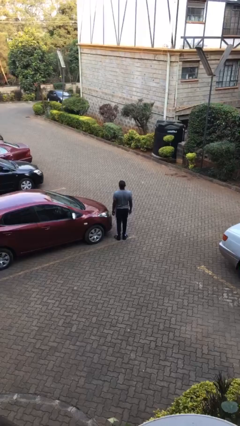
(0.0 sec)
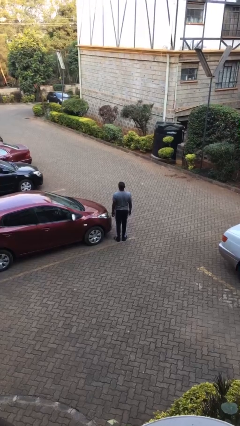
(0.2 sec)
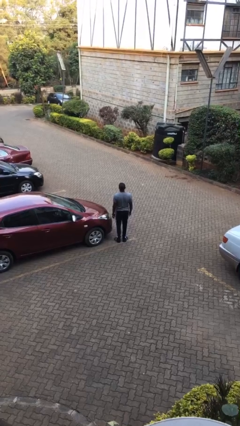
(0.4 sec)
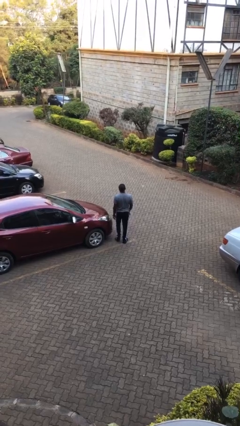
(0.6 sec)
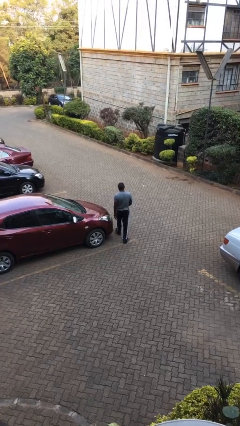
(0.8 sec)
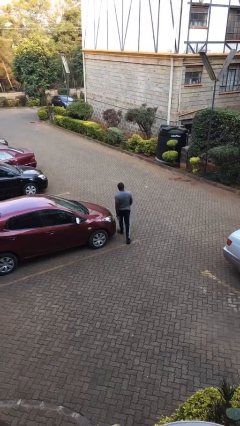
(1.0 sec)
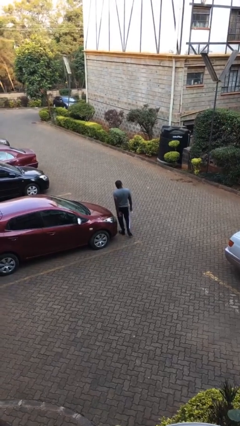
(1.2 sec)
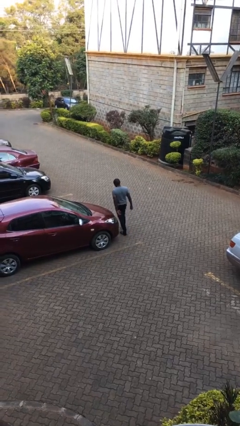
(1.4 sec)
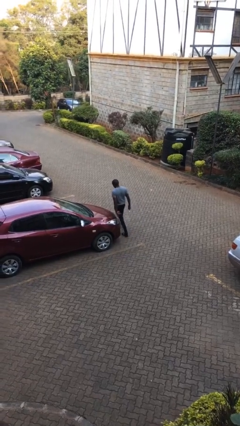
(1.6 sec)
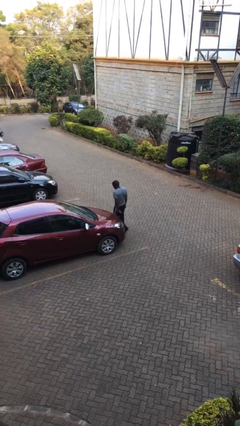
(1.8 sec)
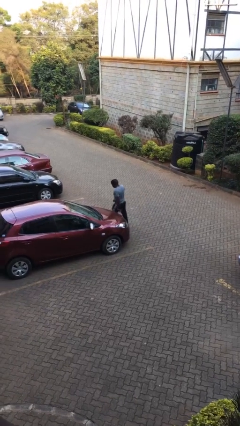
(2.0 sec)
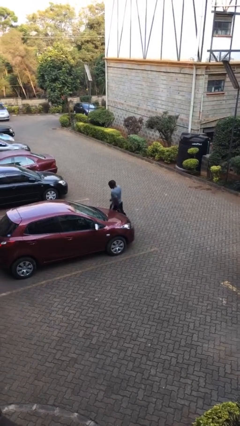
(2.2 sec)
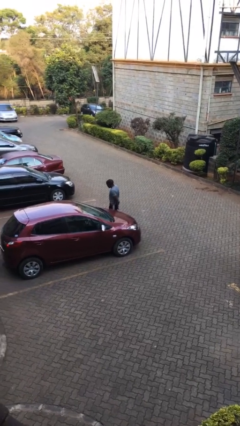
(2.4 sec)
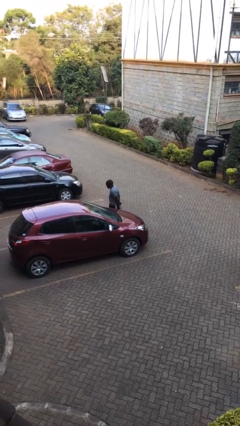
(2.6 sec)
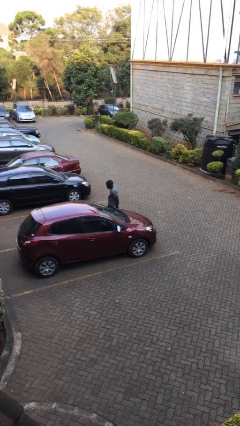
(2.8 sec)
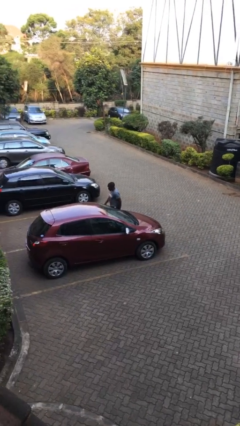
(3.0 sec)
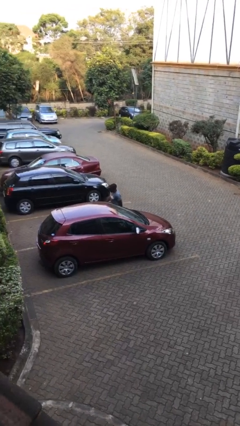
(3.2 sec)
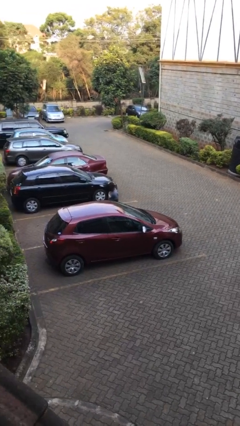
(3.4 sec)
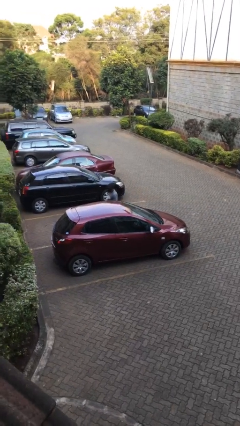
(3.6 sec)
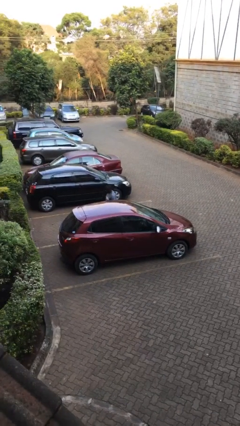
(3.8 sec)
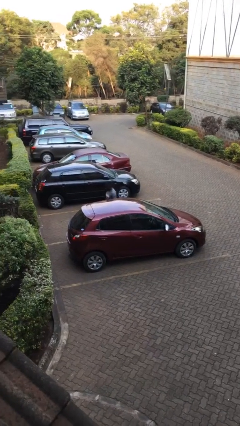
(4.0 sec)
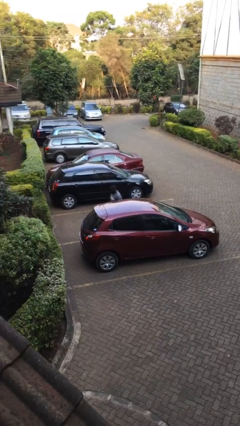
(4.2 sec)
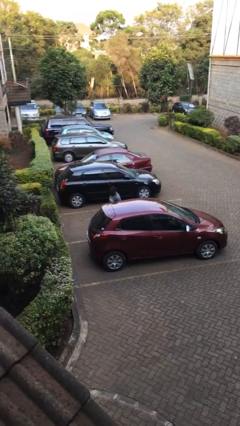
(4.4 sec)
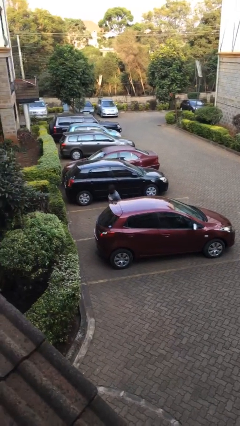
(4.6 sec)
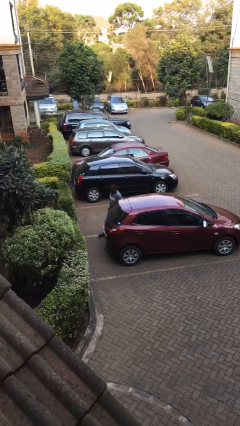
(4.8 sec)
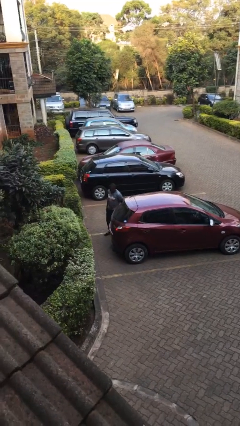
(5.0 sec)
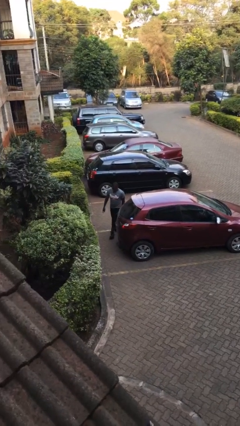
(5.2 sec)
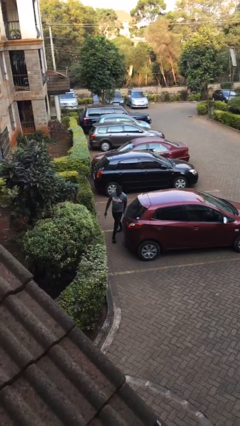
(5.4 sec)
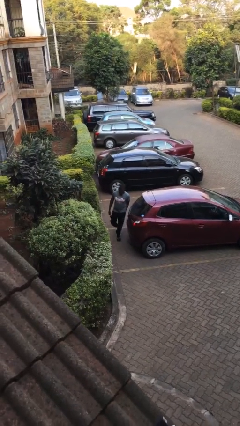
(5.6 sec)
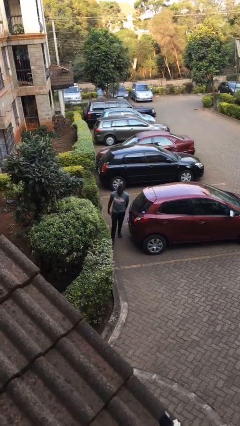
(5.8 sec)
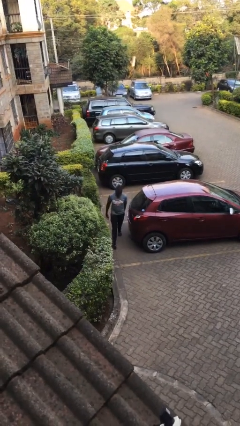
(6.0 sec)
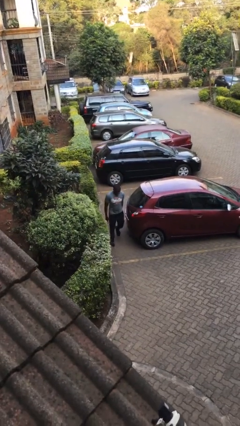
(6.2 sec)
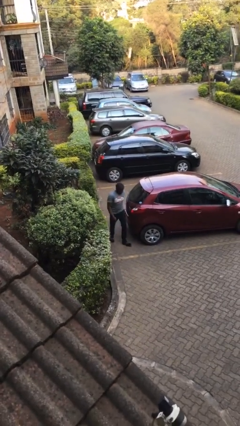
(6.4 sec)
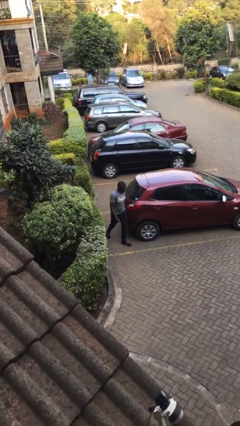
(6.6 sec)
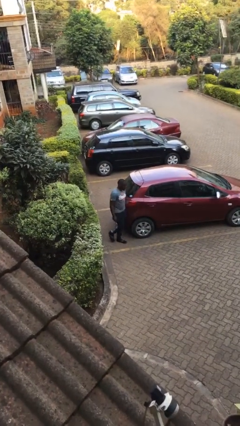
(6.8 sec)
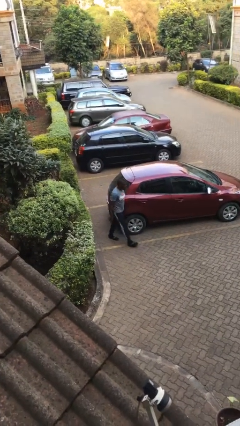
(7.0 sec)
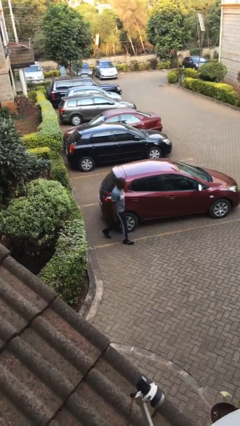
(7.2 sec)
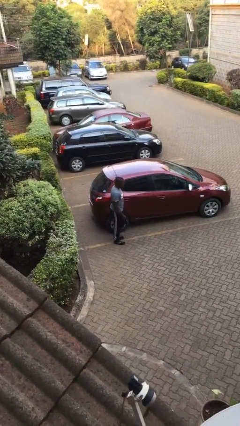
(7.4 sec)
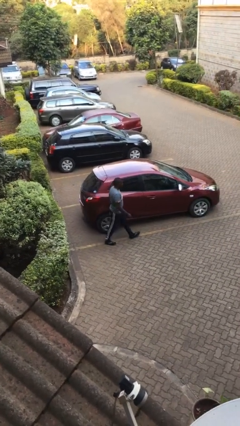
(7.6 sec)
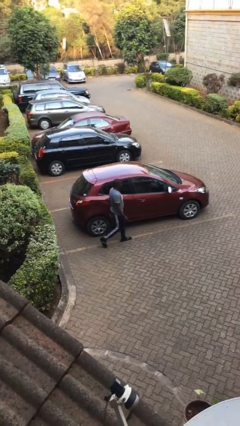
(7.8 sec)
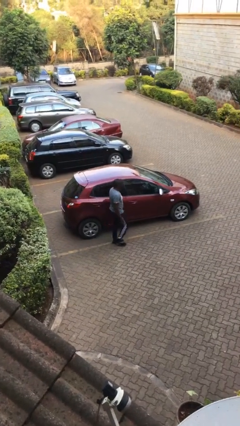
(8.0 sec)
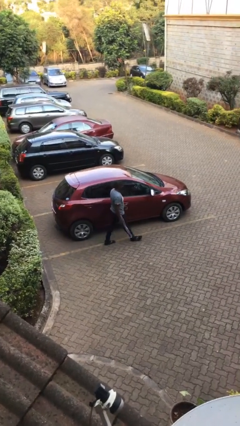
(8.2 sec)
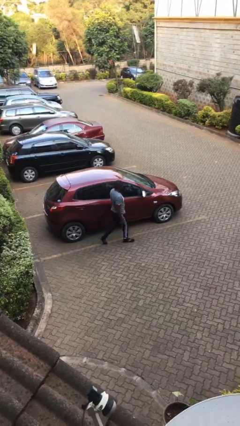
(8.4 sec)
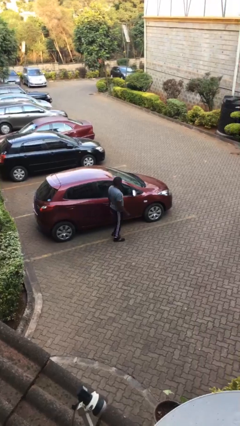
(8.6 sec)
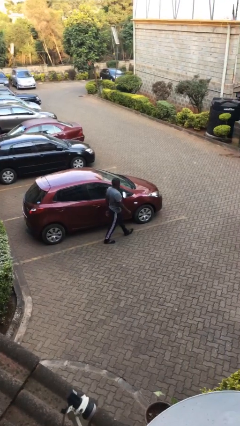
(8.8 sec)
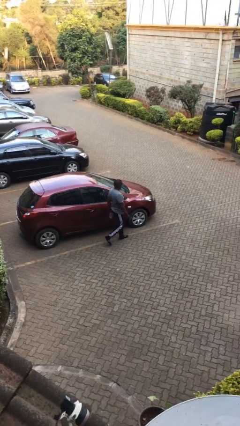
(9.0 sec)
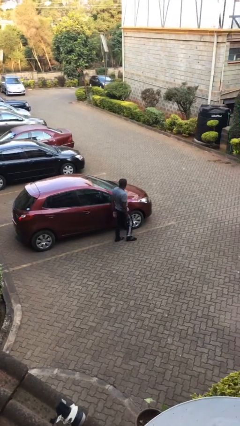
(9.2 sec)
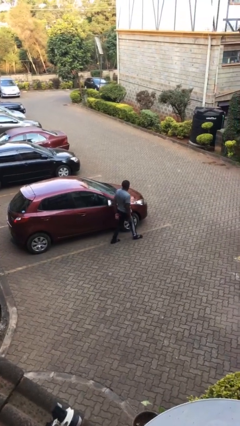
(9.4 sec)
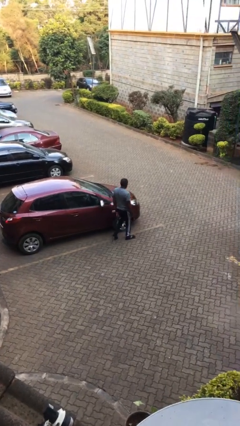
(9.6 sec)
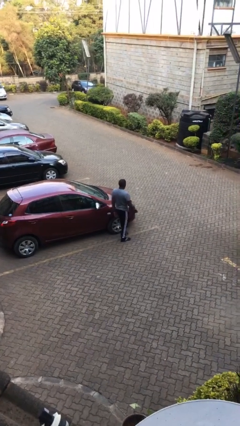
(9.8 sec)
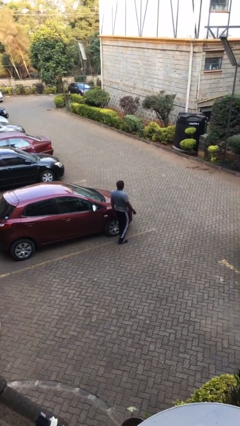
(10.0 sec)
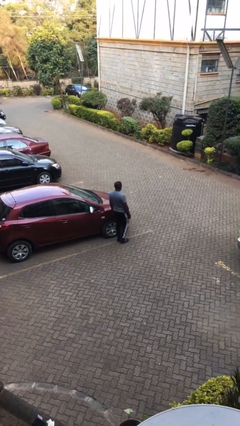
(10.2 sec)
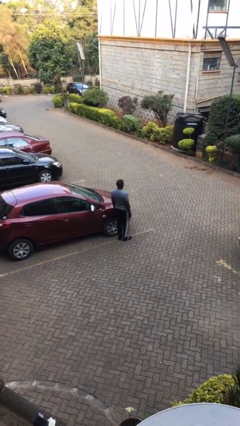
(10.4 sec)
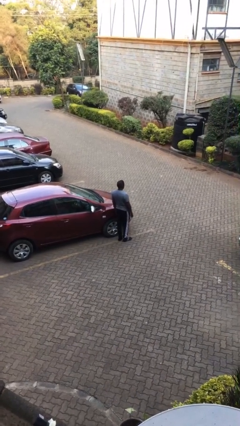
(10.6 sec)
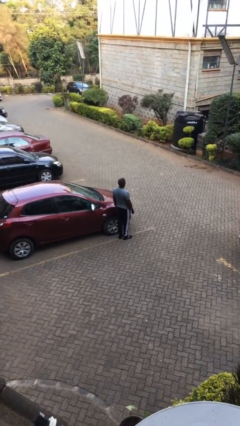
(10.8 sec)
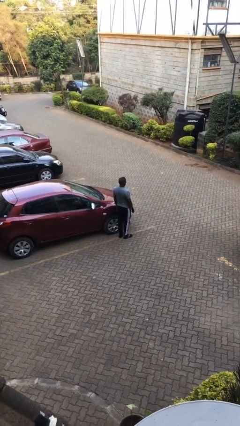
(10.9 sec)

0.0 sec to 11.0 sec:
person walks around car

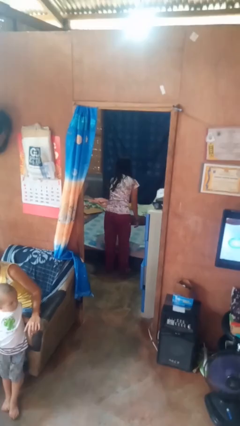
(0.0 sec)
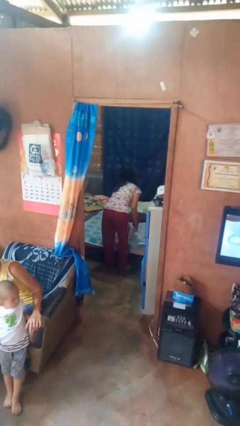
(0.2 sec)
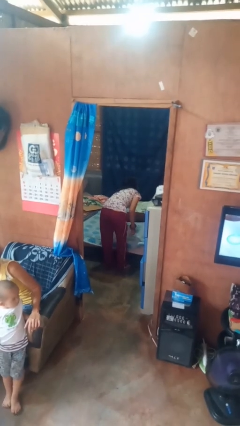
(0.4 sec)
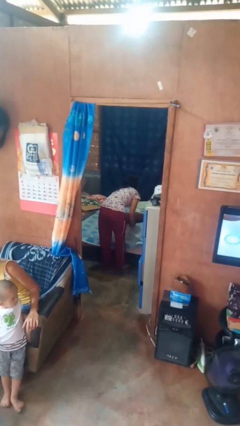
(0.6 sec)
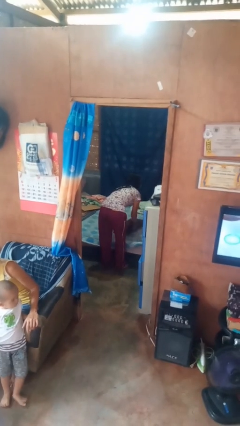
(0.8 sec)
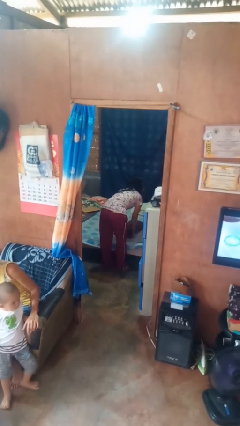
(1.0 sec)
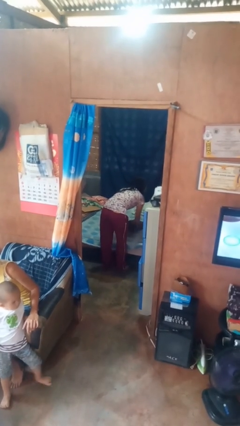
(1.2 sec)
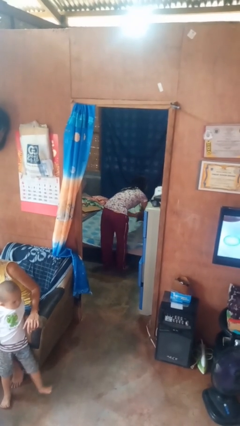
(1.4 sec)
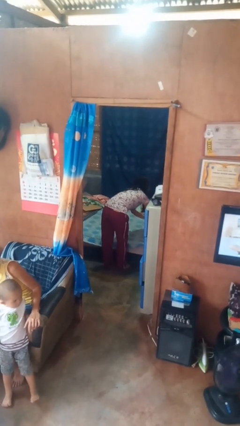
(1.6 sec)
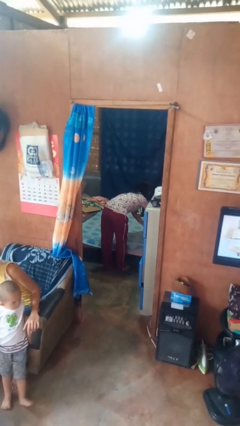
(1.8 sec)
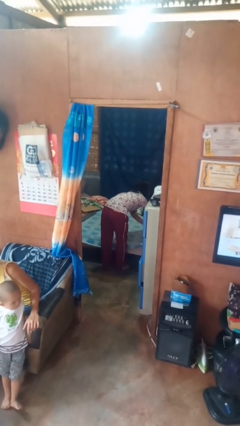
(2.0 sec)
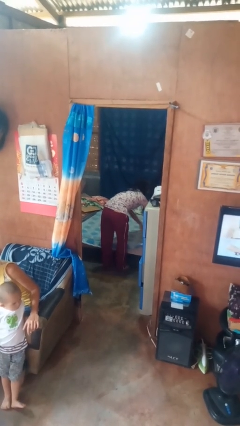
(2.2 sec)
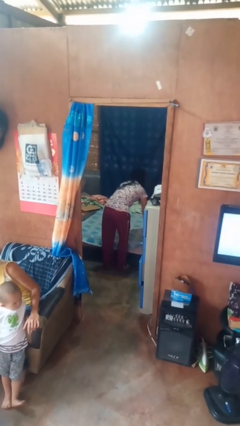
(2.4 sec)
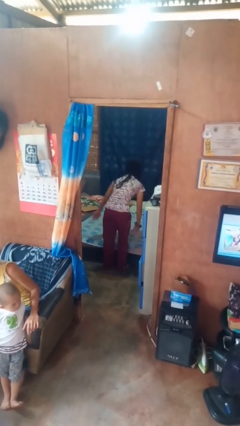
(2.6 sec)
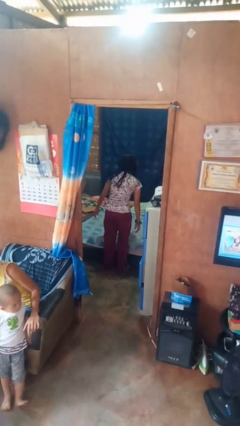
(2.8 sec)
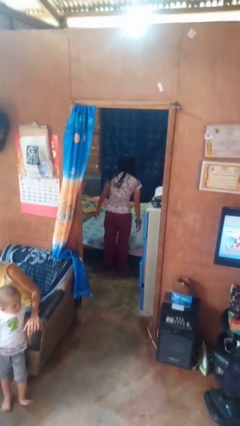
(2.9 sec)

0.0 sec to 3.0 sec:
person makes bed

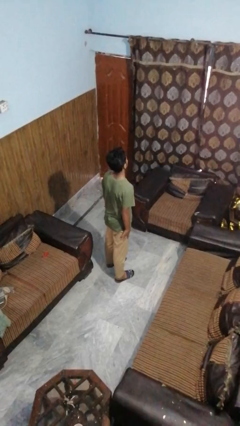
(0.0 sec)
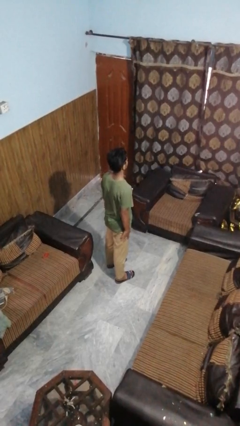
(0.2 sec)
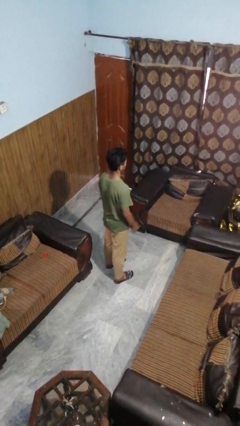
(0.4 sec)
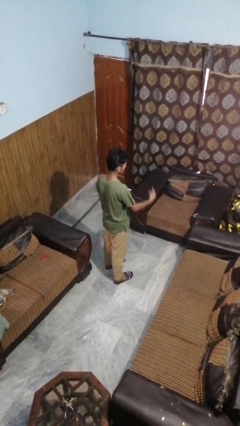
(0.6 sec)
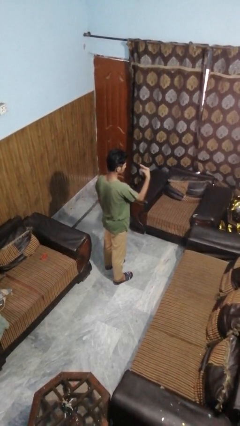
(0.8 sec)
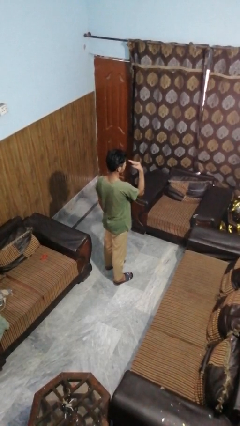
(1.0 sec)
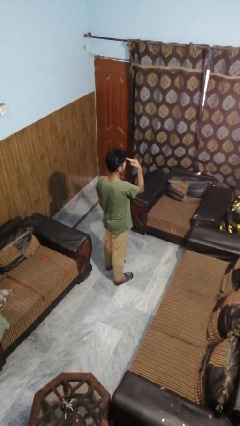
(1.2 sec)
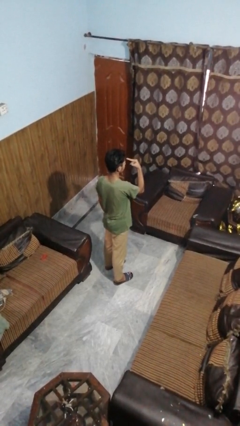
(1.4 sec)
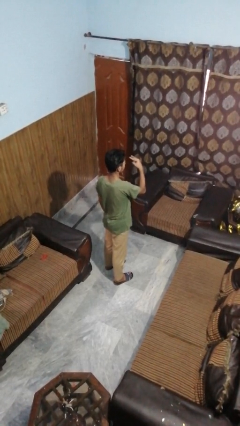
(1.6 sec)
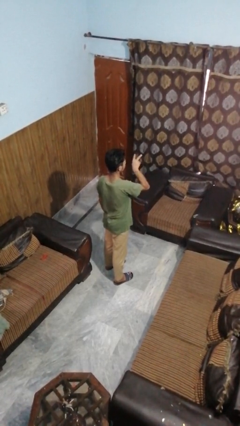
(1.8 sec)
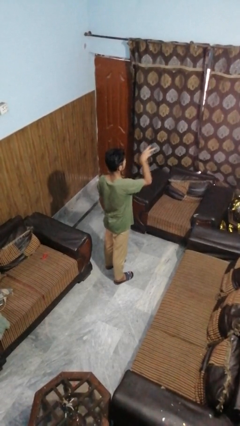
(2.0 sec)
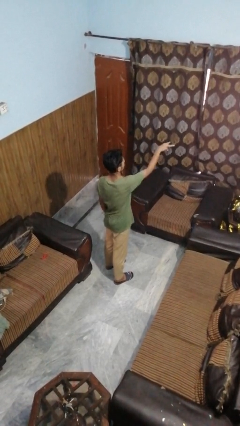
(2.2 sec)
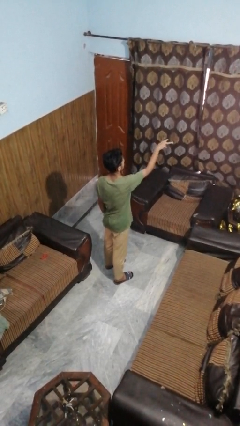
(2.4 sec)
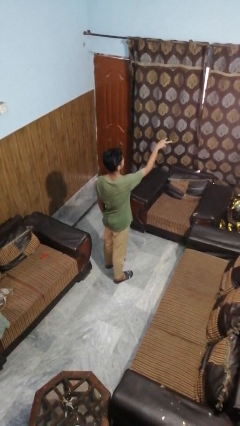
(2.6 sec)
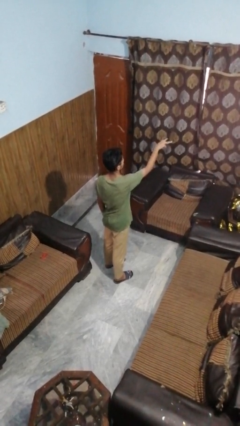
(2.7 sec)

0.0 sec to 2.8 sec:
person gestures watch closely

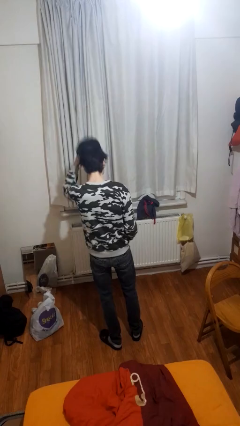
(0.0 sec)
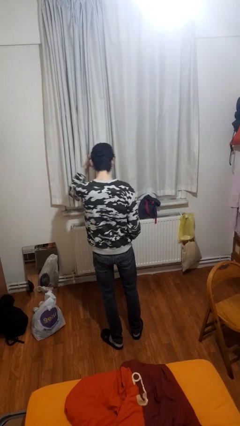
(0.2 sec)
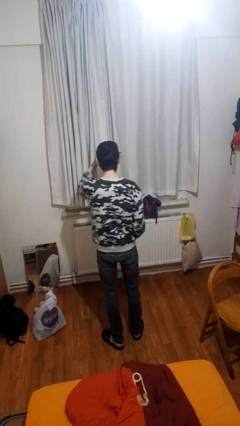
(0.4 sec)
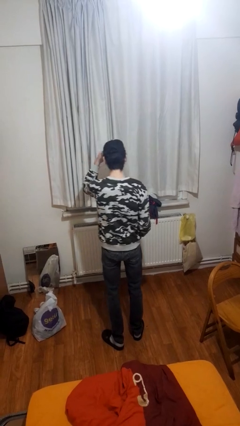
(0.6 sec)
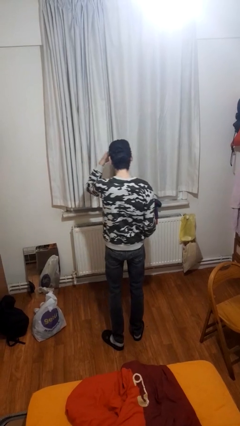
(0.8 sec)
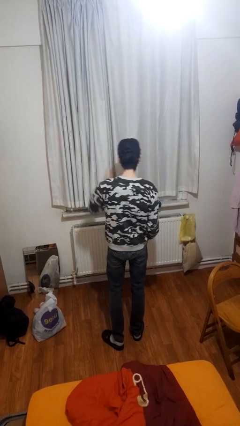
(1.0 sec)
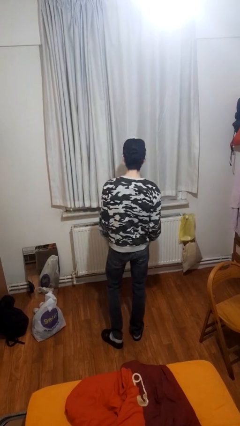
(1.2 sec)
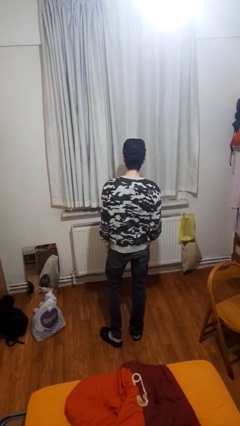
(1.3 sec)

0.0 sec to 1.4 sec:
person puts on hat
